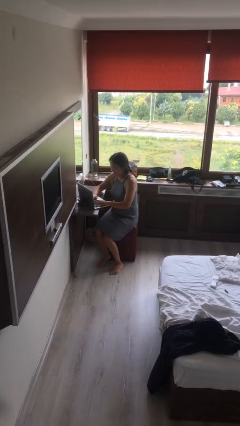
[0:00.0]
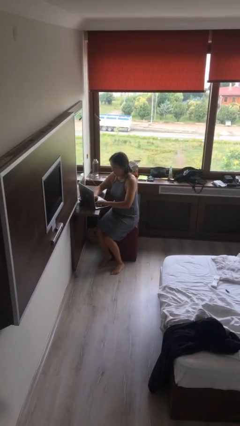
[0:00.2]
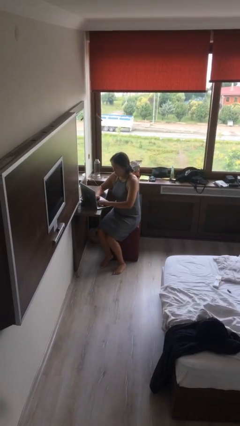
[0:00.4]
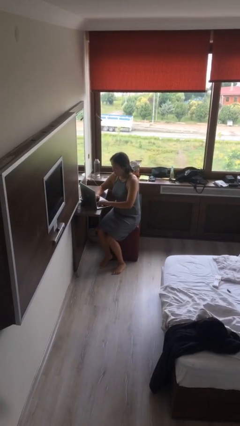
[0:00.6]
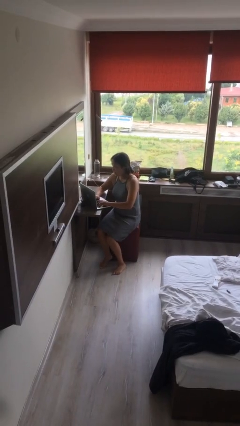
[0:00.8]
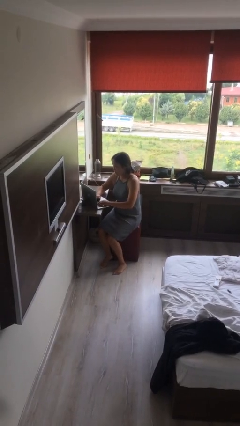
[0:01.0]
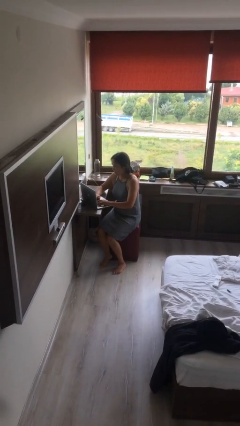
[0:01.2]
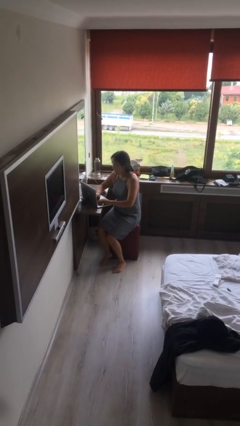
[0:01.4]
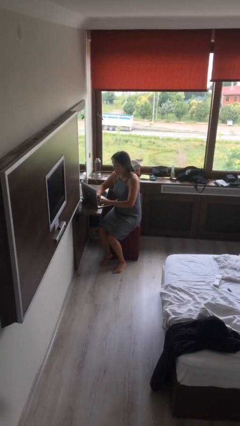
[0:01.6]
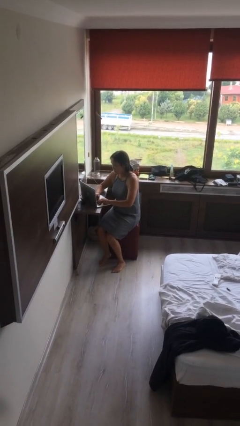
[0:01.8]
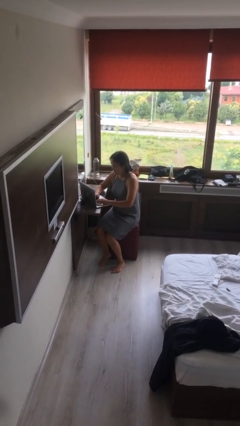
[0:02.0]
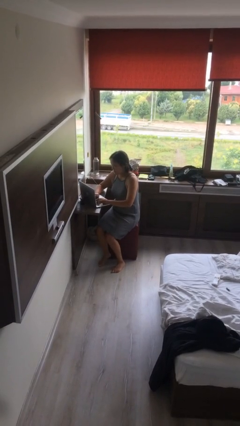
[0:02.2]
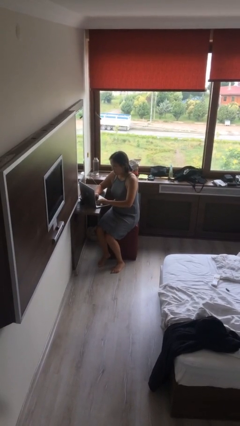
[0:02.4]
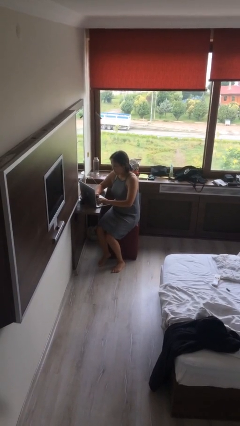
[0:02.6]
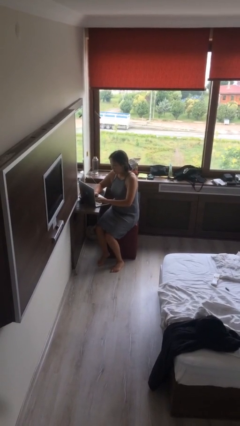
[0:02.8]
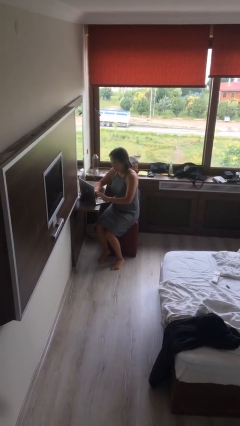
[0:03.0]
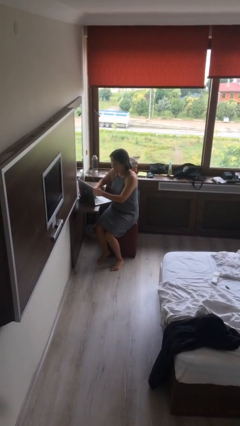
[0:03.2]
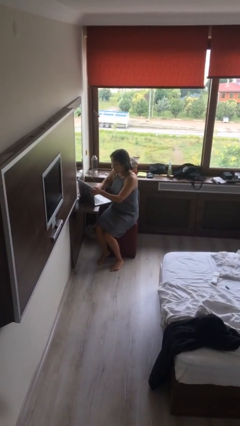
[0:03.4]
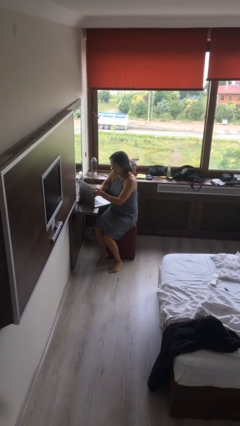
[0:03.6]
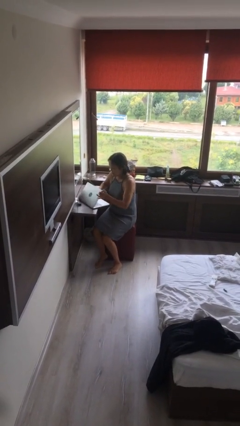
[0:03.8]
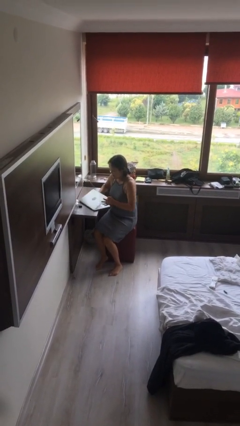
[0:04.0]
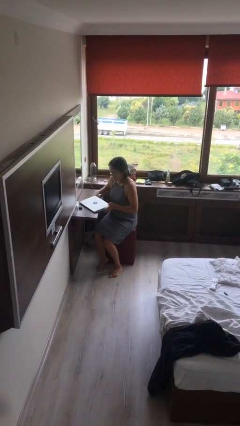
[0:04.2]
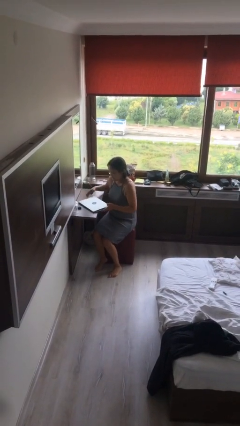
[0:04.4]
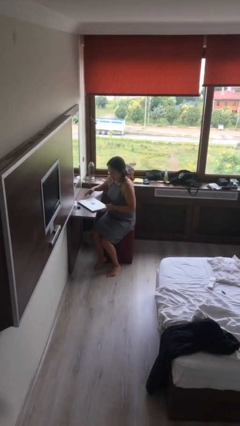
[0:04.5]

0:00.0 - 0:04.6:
person interacts with laptop

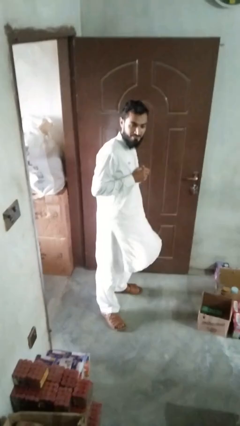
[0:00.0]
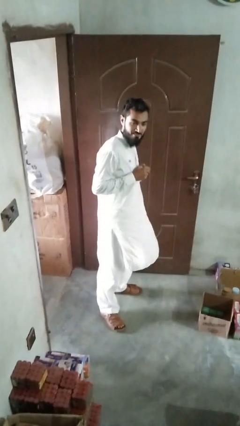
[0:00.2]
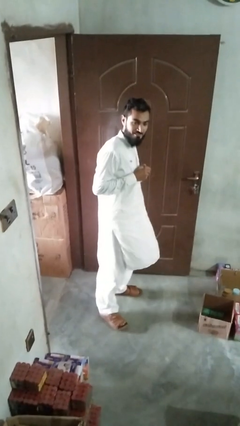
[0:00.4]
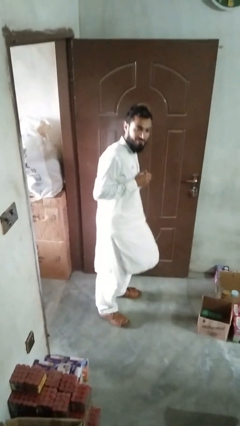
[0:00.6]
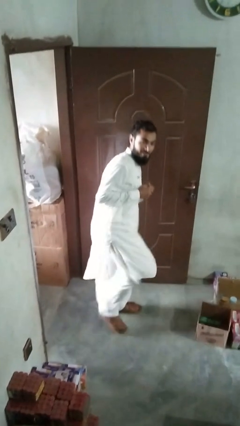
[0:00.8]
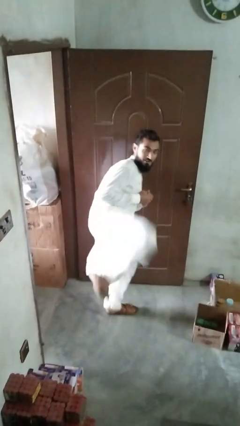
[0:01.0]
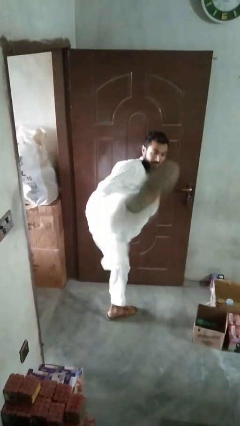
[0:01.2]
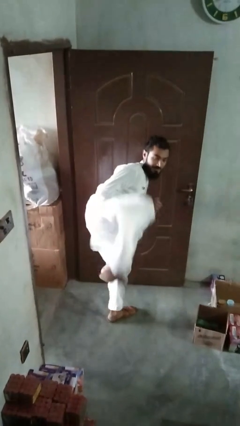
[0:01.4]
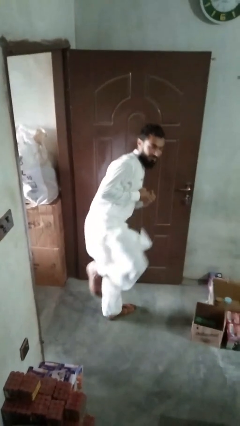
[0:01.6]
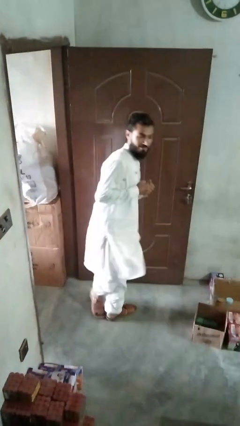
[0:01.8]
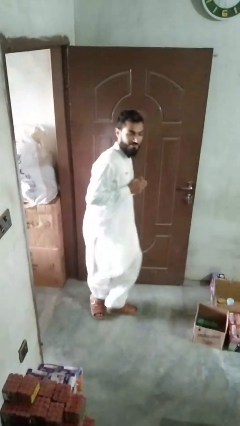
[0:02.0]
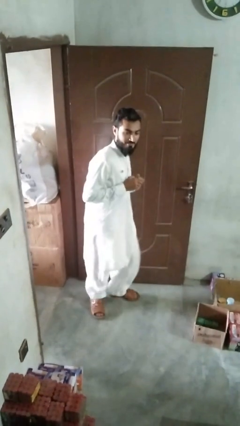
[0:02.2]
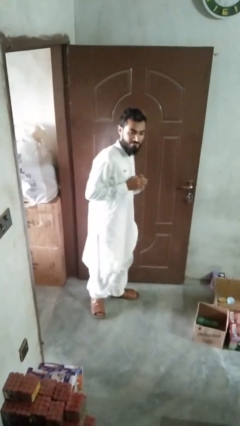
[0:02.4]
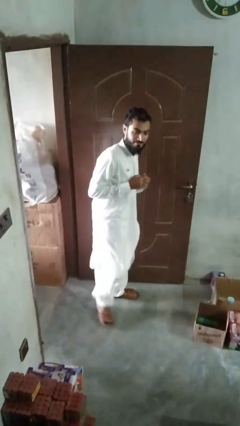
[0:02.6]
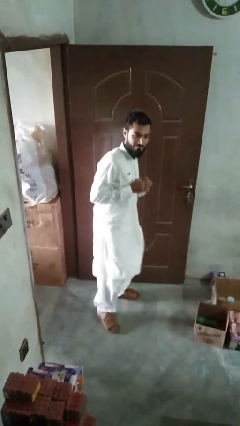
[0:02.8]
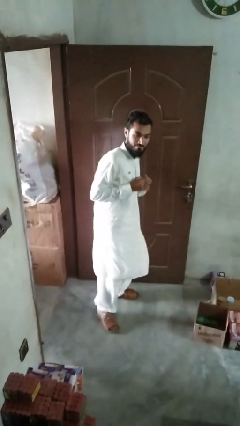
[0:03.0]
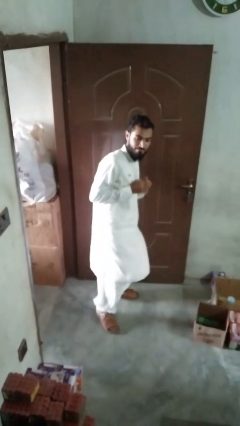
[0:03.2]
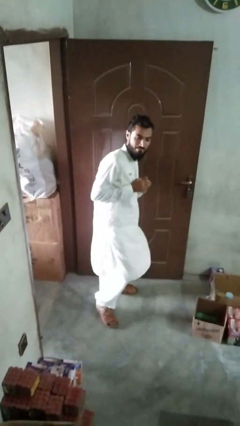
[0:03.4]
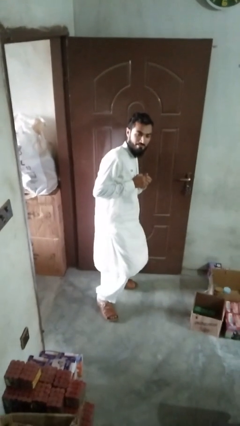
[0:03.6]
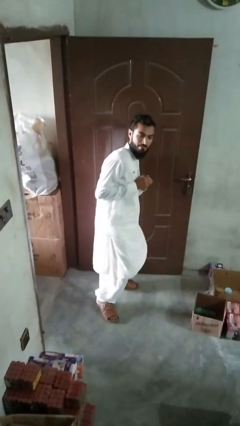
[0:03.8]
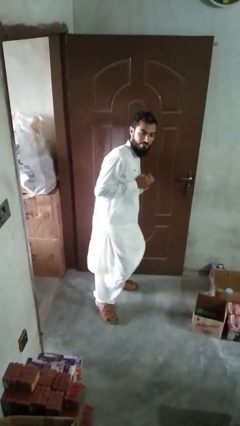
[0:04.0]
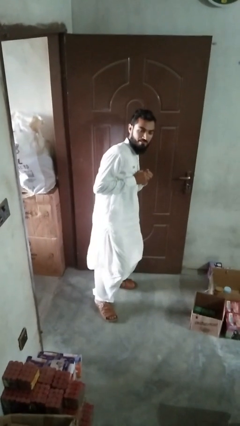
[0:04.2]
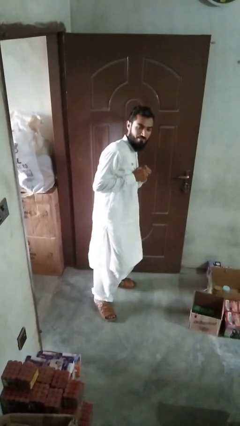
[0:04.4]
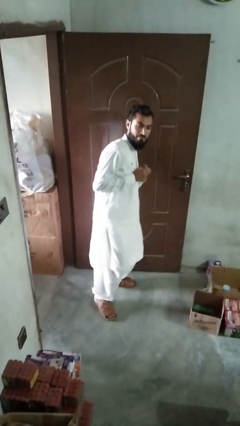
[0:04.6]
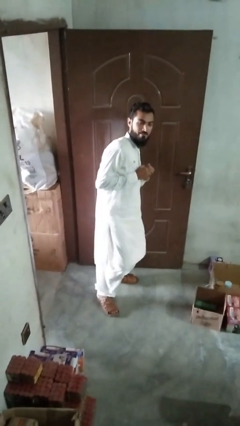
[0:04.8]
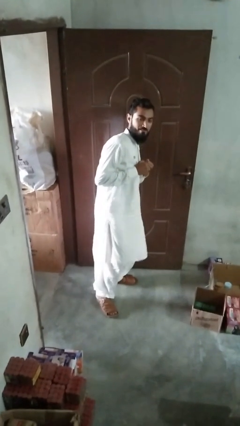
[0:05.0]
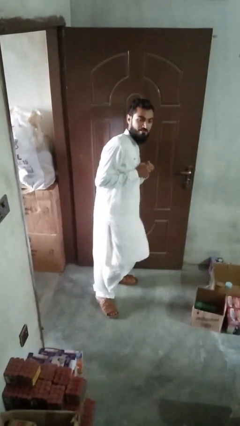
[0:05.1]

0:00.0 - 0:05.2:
person karate kicks

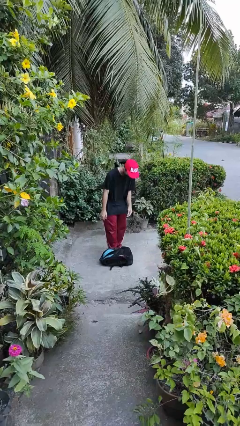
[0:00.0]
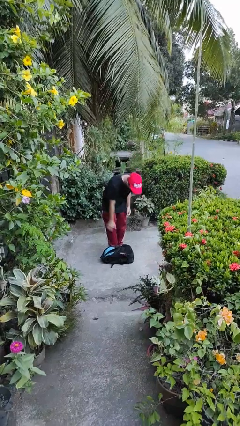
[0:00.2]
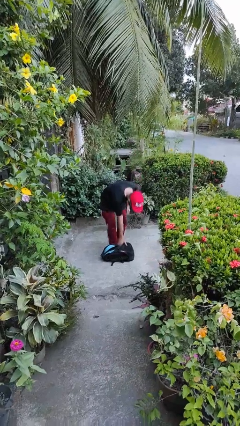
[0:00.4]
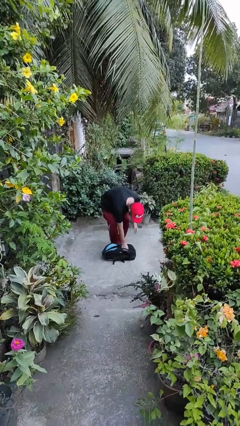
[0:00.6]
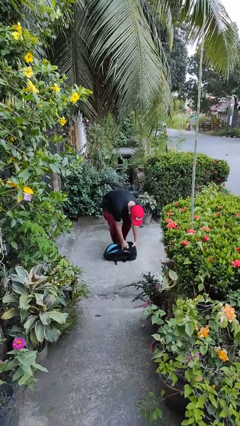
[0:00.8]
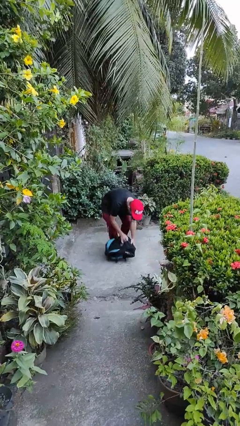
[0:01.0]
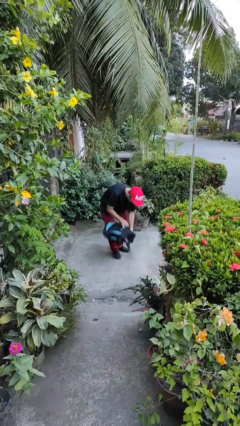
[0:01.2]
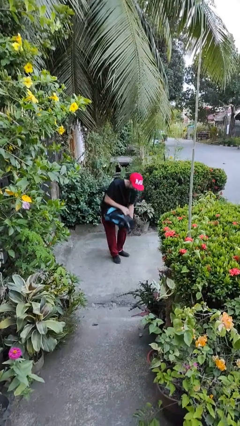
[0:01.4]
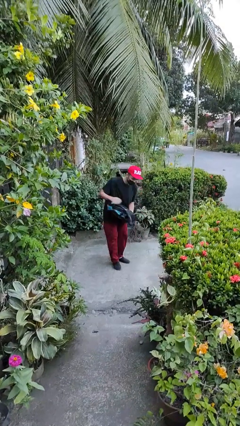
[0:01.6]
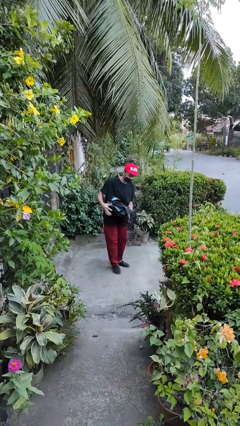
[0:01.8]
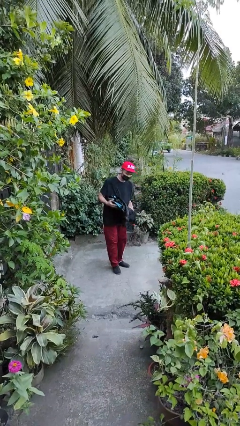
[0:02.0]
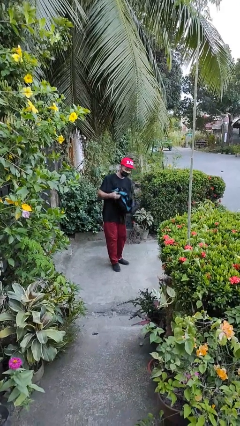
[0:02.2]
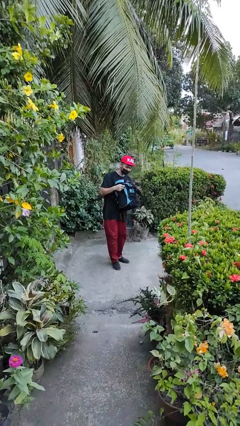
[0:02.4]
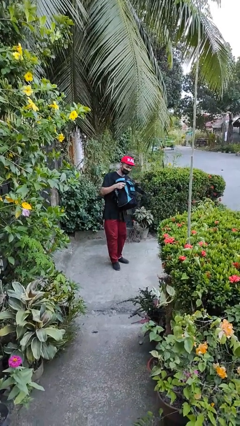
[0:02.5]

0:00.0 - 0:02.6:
person picks up object from floor

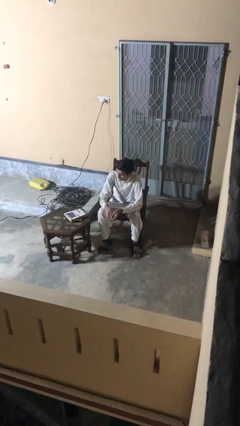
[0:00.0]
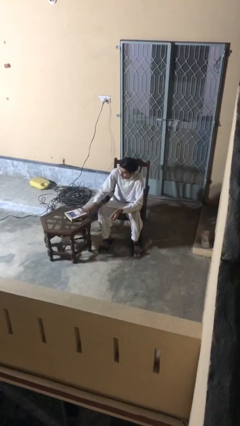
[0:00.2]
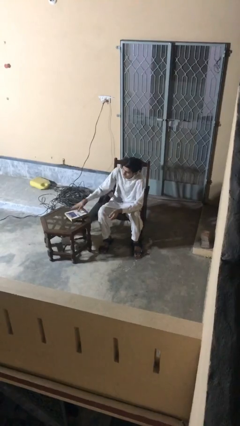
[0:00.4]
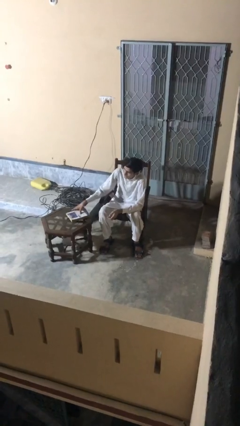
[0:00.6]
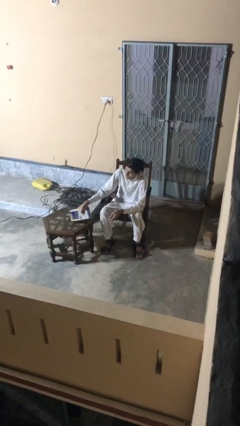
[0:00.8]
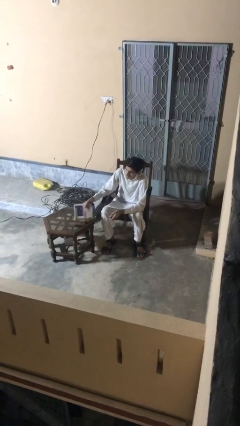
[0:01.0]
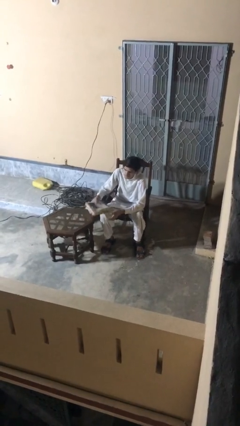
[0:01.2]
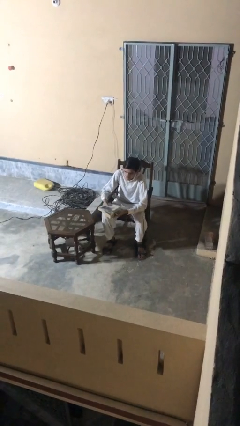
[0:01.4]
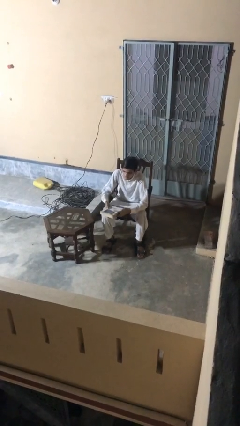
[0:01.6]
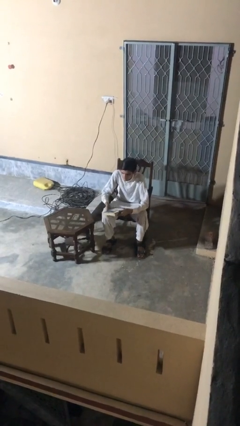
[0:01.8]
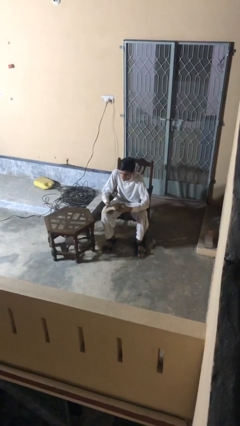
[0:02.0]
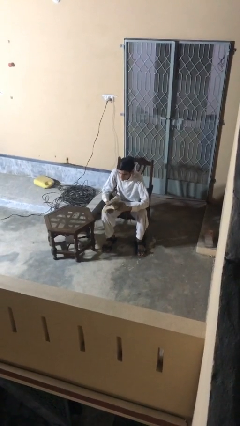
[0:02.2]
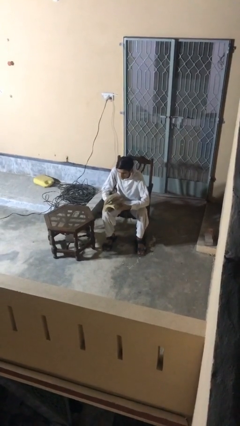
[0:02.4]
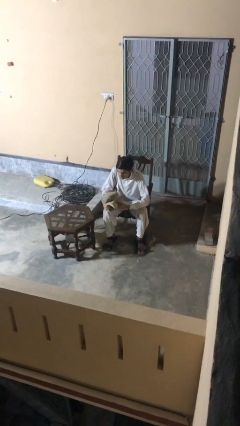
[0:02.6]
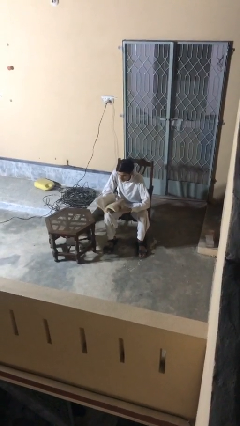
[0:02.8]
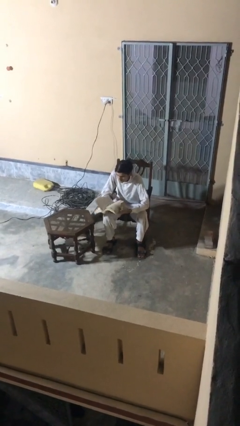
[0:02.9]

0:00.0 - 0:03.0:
person picks up object from table

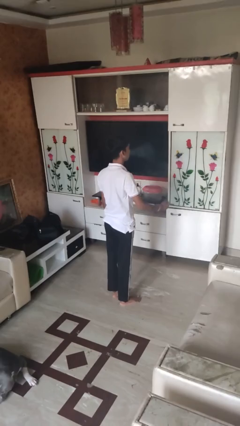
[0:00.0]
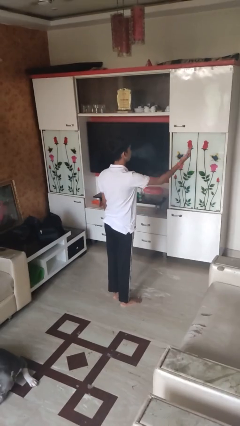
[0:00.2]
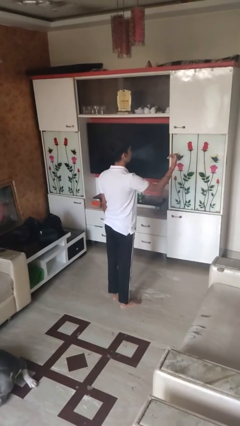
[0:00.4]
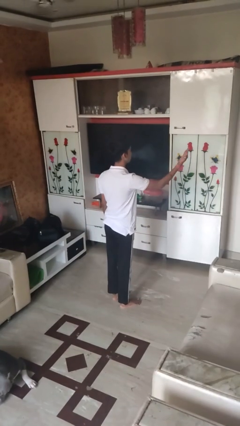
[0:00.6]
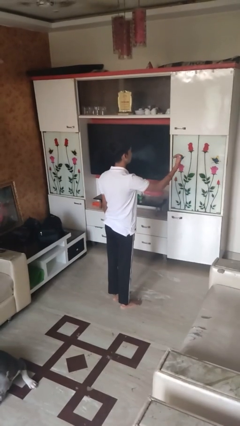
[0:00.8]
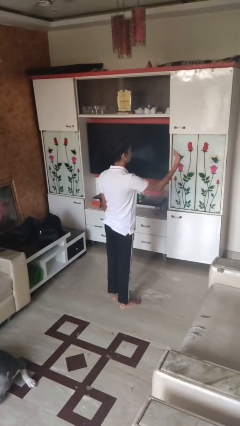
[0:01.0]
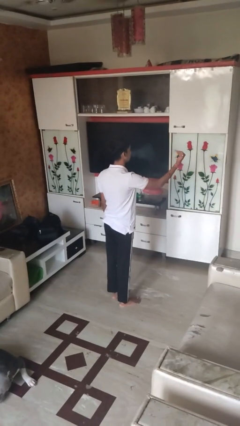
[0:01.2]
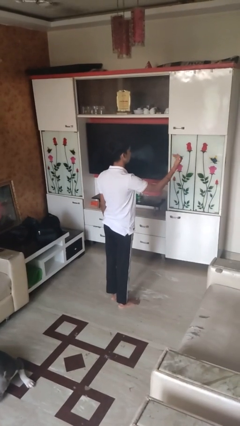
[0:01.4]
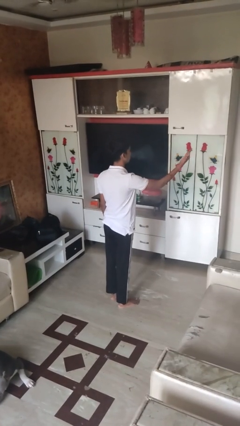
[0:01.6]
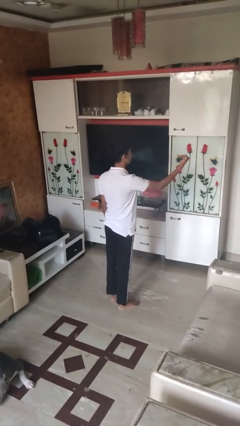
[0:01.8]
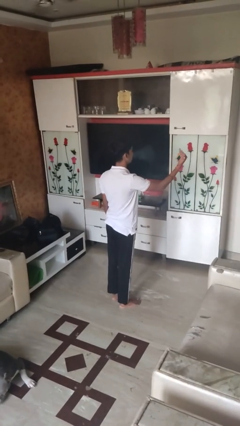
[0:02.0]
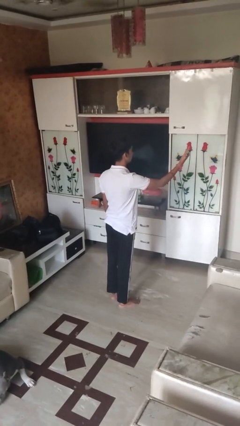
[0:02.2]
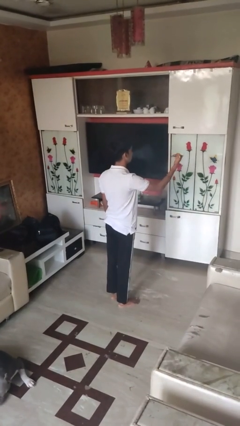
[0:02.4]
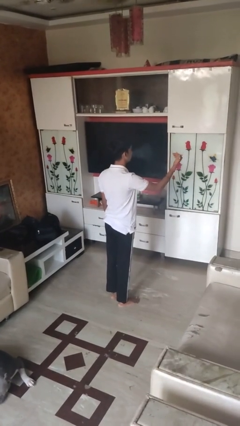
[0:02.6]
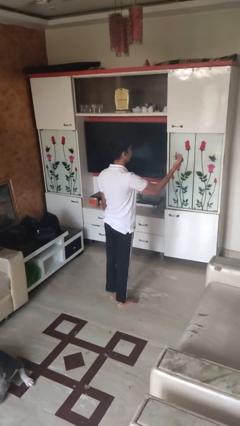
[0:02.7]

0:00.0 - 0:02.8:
person gestures come here
